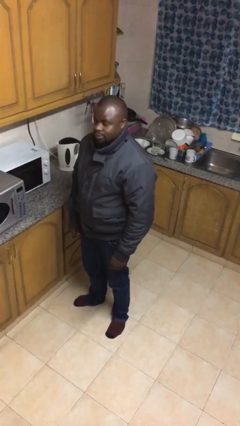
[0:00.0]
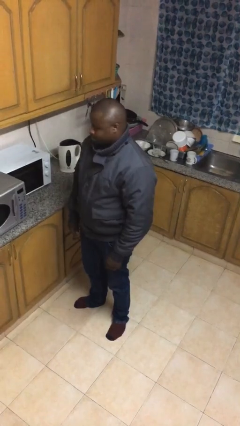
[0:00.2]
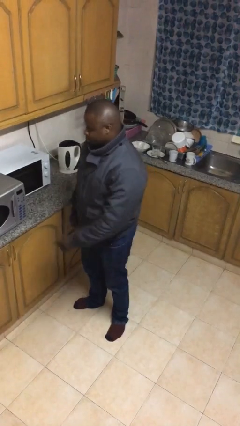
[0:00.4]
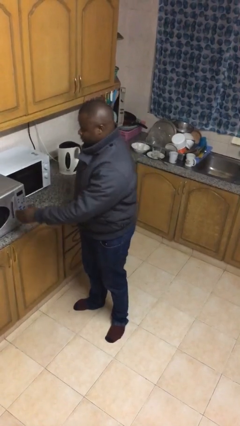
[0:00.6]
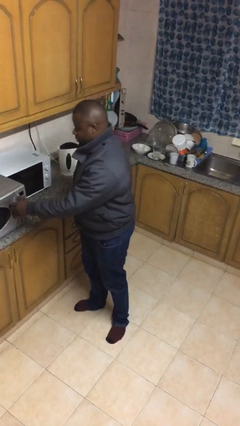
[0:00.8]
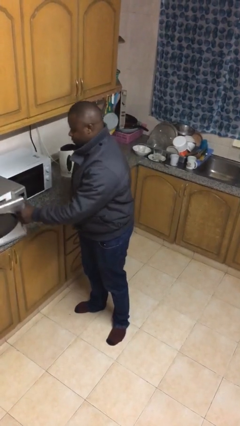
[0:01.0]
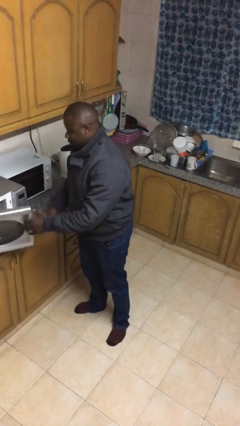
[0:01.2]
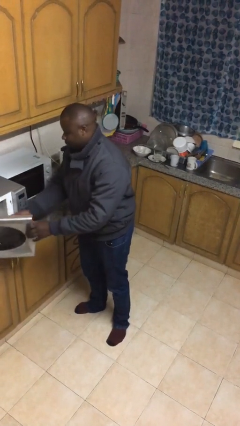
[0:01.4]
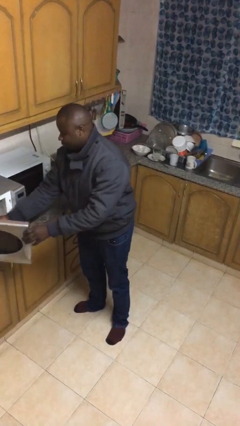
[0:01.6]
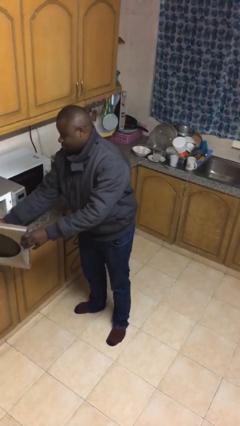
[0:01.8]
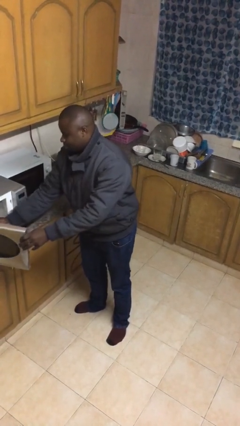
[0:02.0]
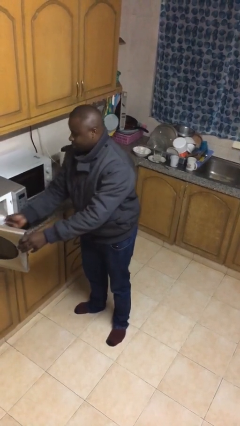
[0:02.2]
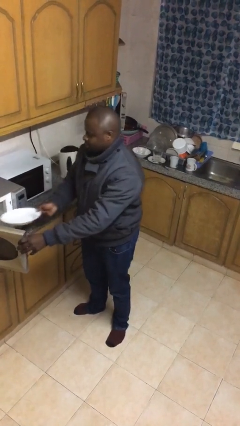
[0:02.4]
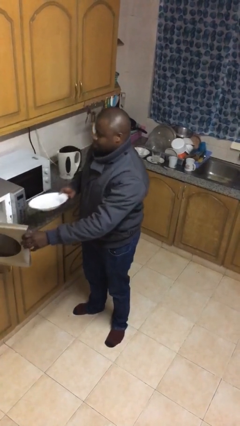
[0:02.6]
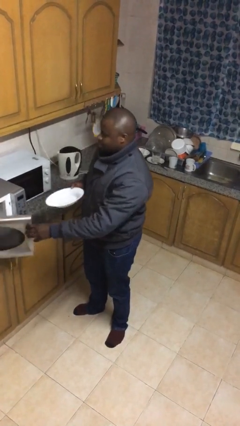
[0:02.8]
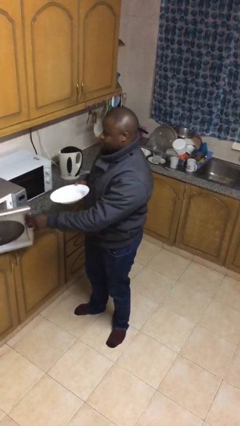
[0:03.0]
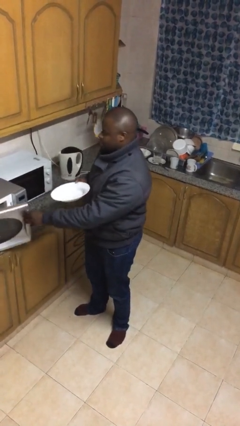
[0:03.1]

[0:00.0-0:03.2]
person takes object from microwave

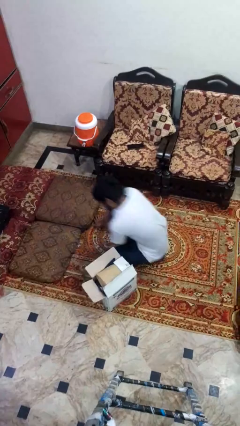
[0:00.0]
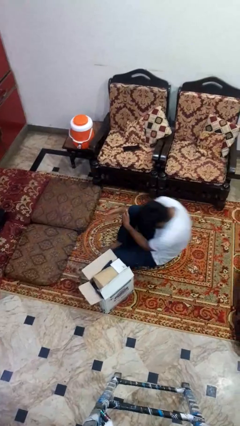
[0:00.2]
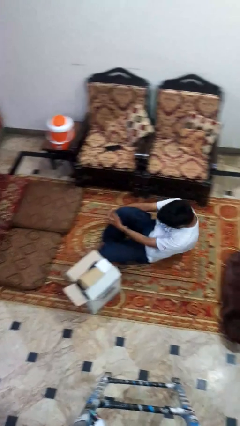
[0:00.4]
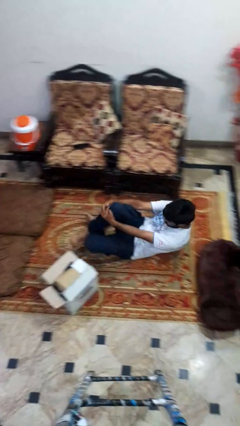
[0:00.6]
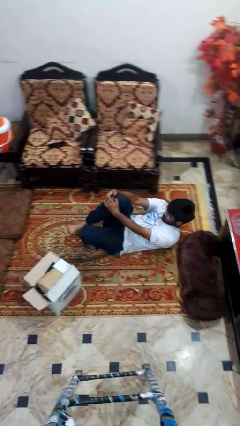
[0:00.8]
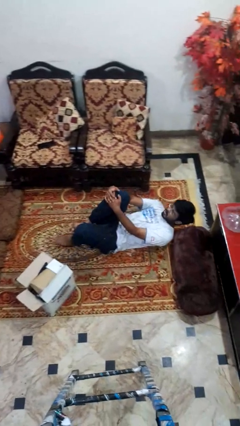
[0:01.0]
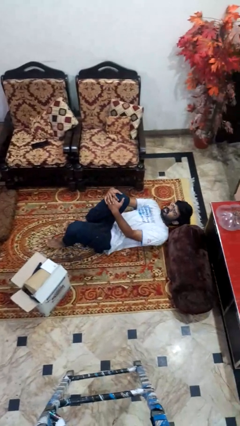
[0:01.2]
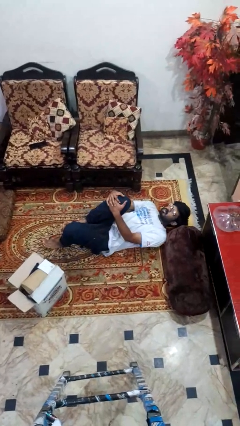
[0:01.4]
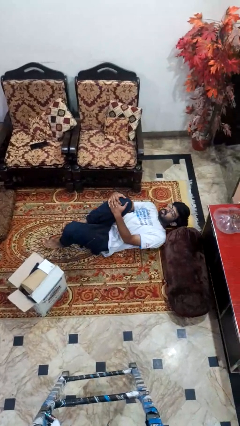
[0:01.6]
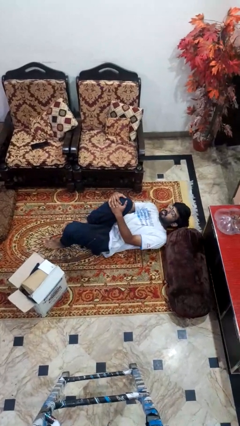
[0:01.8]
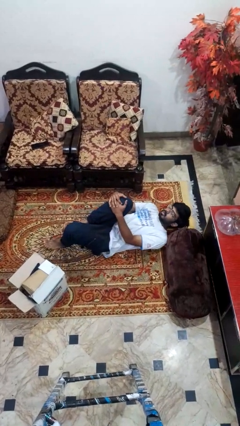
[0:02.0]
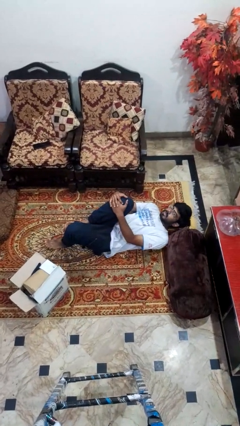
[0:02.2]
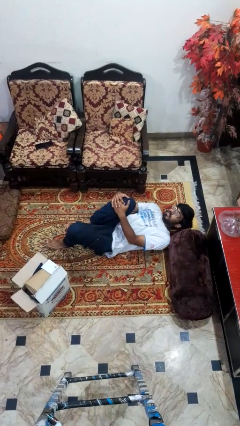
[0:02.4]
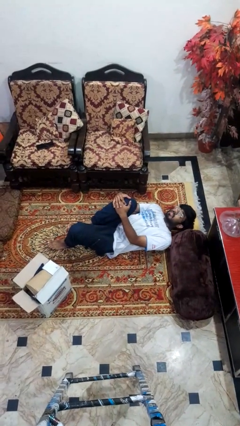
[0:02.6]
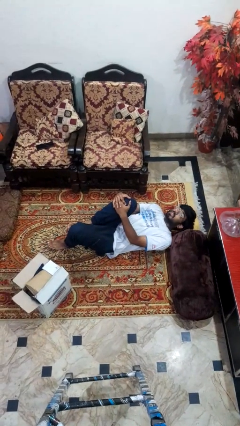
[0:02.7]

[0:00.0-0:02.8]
person lies down on floor

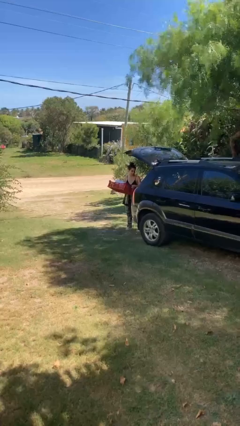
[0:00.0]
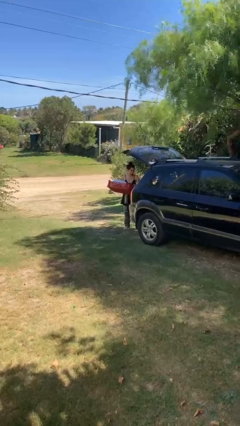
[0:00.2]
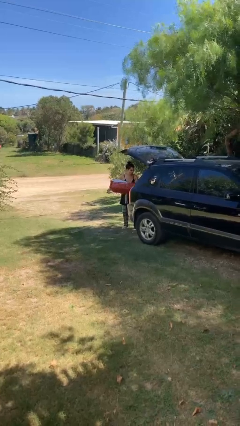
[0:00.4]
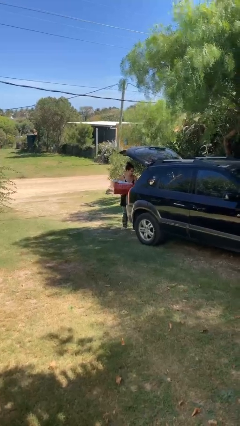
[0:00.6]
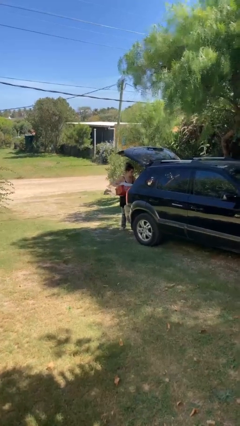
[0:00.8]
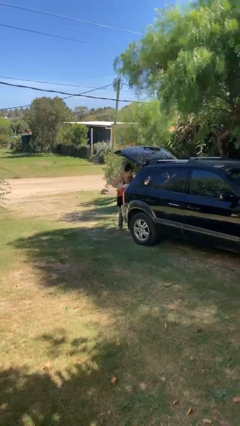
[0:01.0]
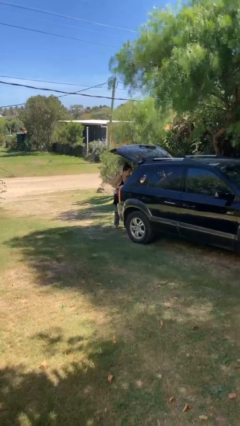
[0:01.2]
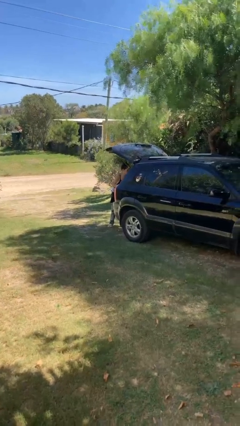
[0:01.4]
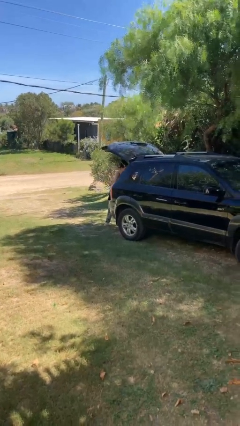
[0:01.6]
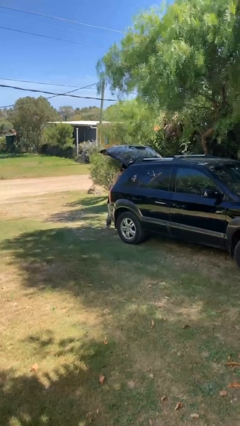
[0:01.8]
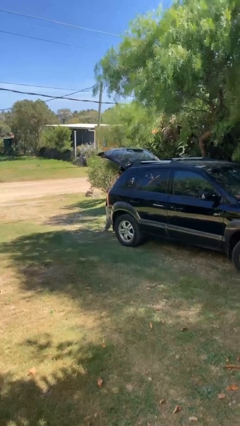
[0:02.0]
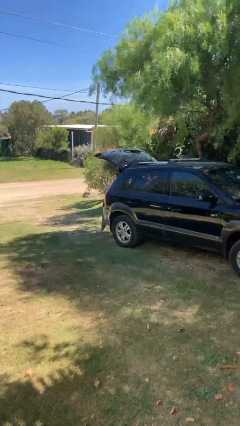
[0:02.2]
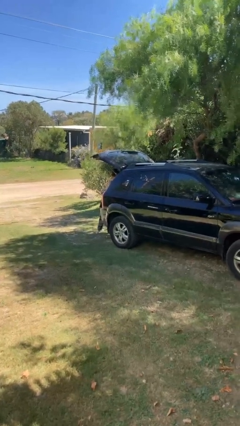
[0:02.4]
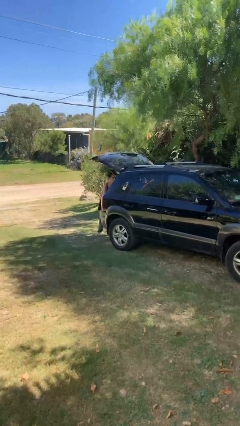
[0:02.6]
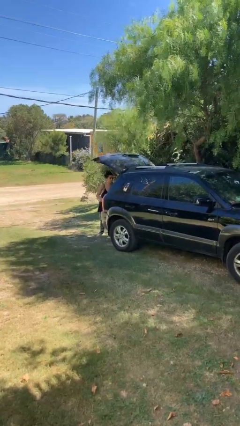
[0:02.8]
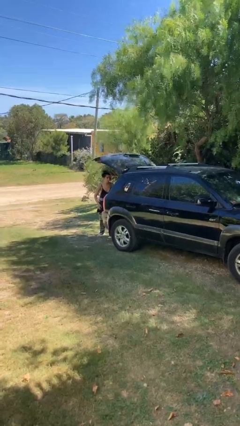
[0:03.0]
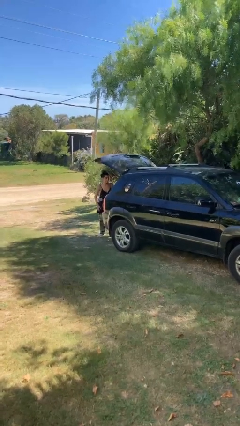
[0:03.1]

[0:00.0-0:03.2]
person loads car

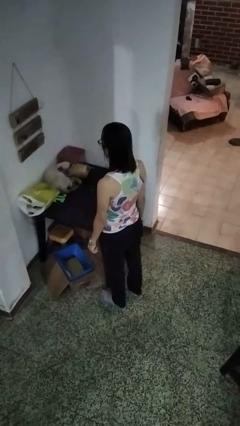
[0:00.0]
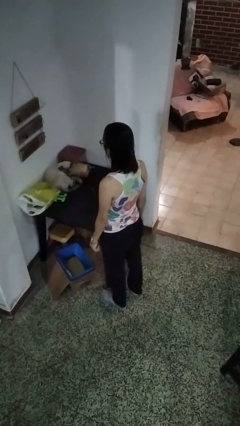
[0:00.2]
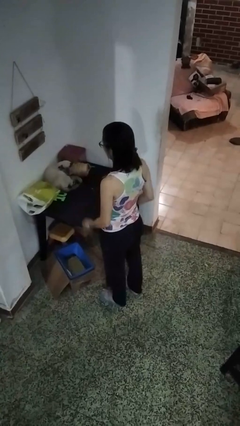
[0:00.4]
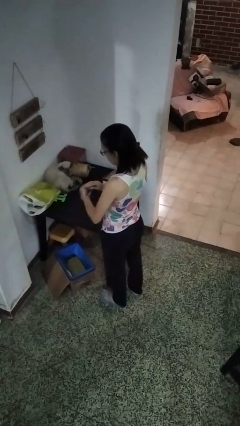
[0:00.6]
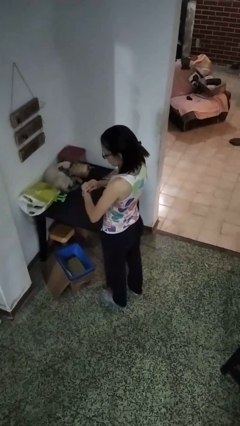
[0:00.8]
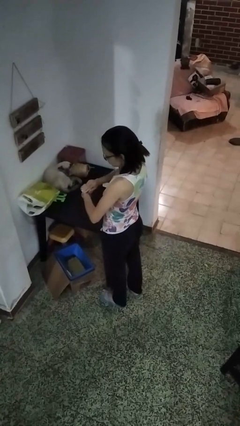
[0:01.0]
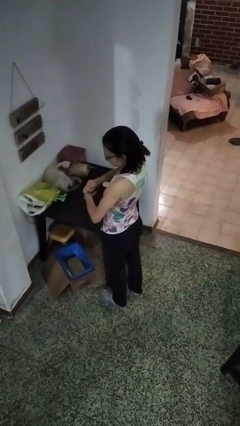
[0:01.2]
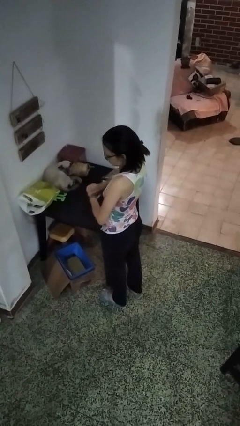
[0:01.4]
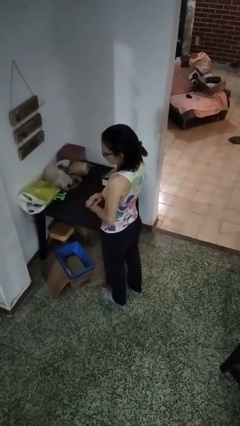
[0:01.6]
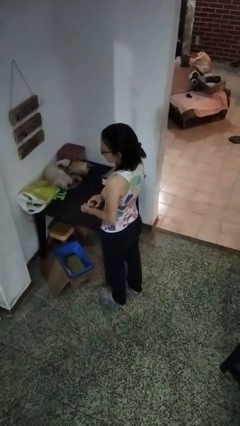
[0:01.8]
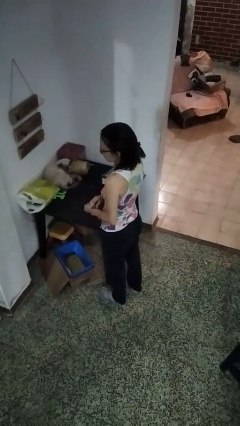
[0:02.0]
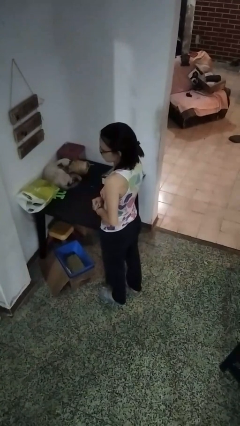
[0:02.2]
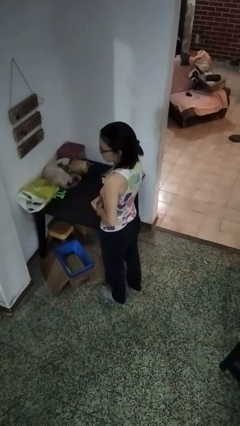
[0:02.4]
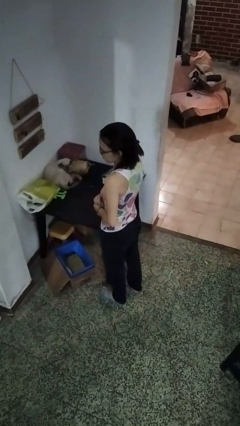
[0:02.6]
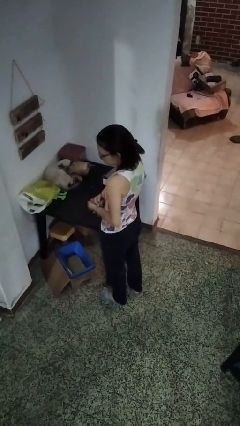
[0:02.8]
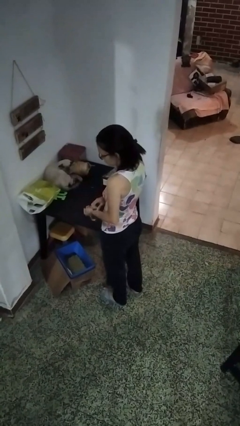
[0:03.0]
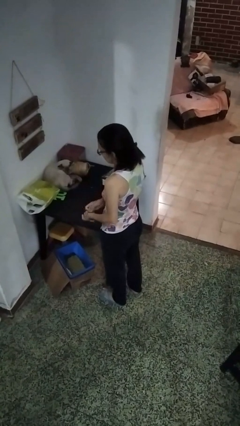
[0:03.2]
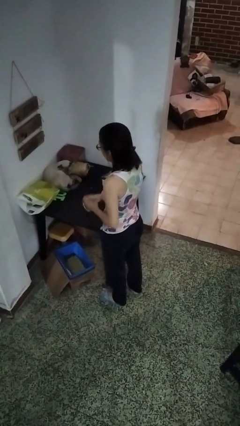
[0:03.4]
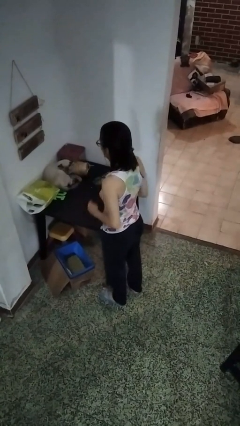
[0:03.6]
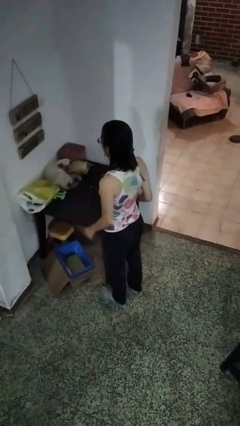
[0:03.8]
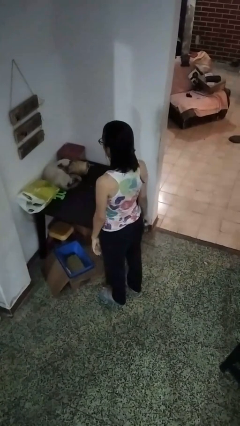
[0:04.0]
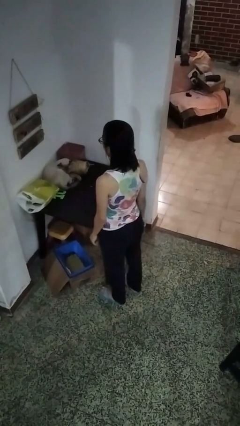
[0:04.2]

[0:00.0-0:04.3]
person takes off wristwatch

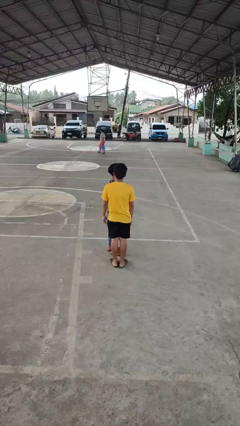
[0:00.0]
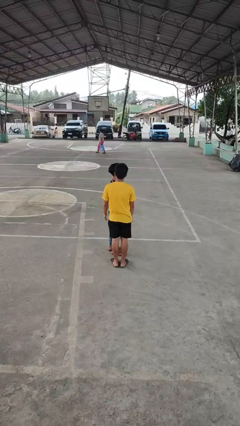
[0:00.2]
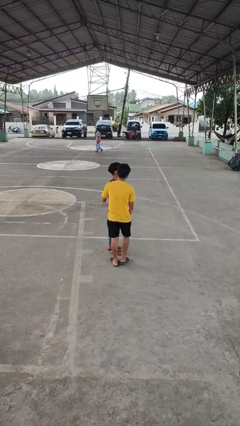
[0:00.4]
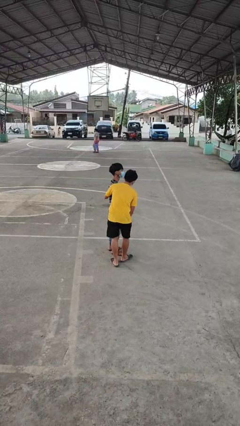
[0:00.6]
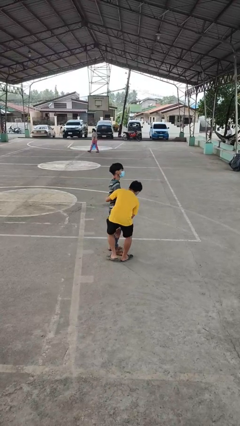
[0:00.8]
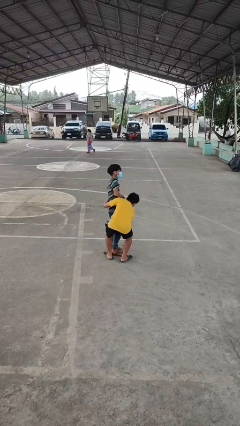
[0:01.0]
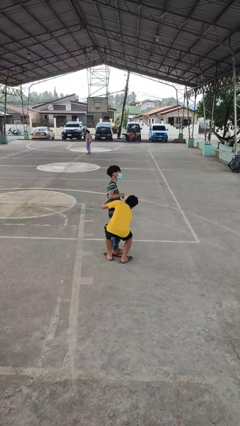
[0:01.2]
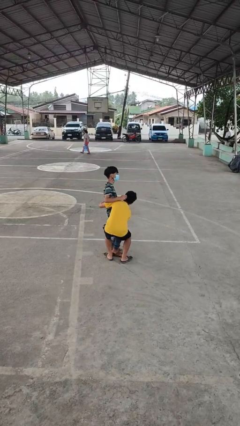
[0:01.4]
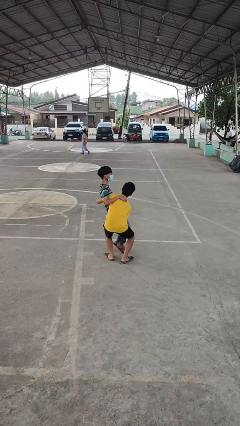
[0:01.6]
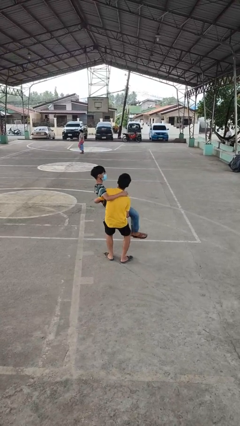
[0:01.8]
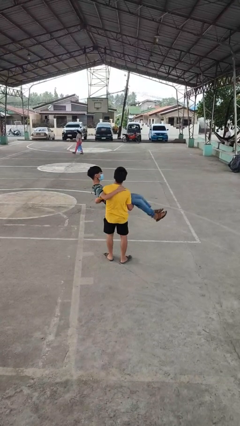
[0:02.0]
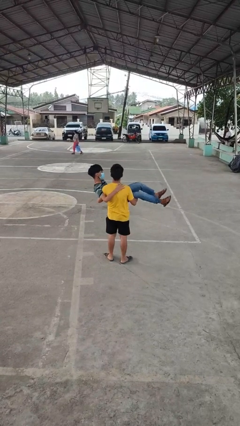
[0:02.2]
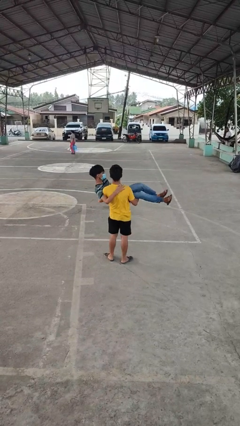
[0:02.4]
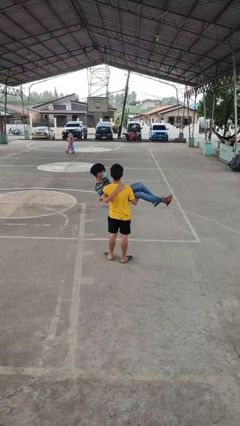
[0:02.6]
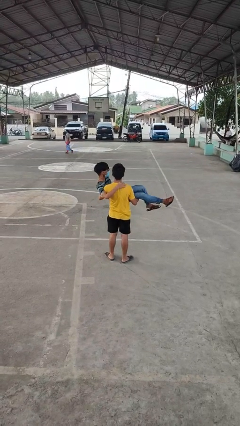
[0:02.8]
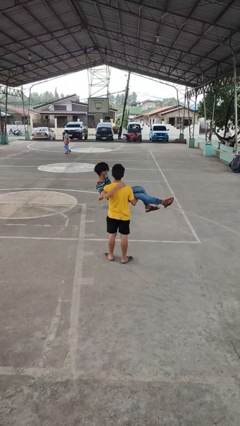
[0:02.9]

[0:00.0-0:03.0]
person picks up person

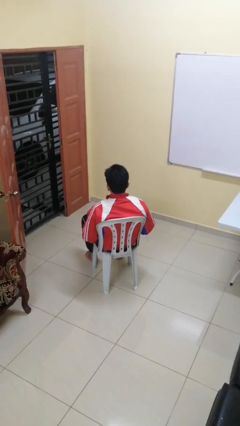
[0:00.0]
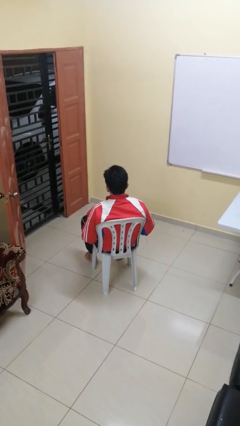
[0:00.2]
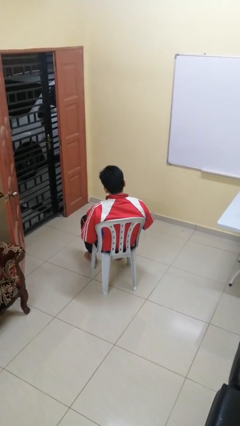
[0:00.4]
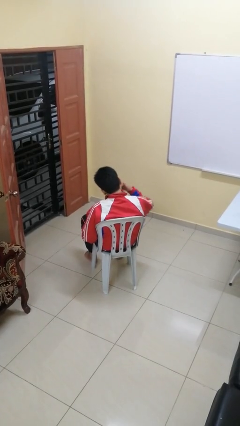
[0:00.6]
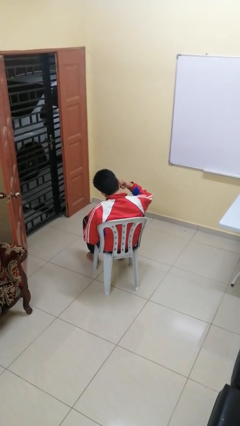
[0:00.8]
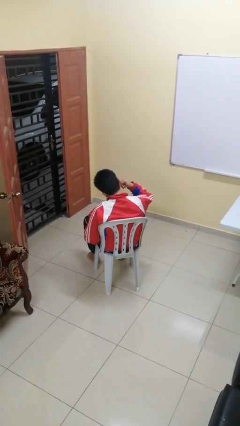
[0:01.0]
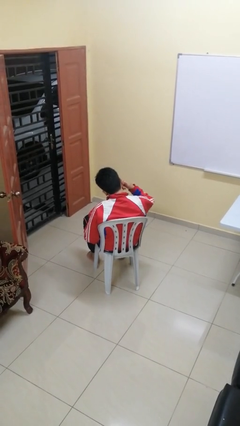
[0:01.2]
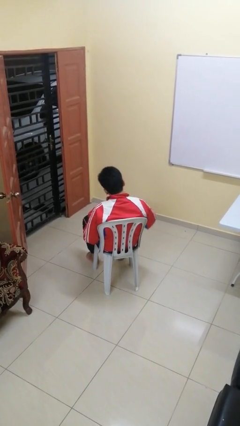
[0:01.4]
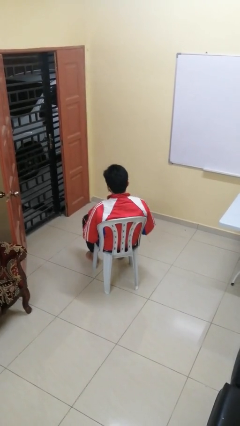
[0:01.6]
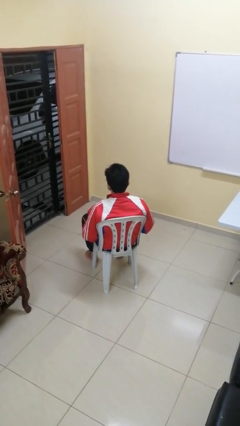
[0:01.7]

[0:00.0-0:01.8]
person gestures call me
